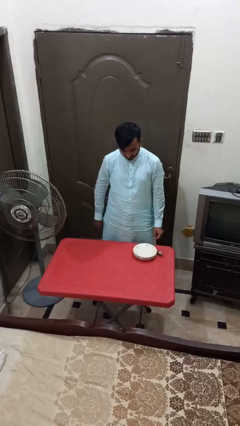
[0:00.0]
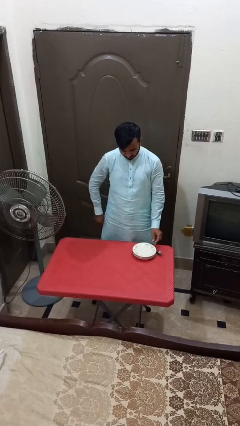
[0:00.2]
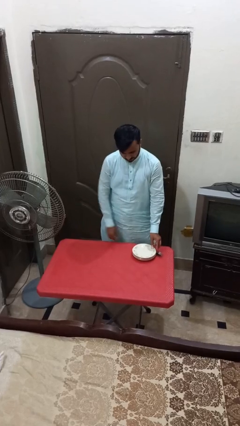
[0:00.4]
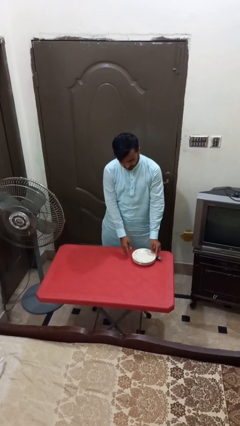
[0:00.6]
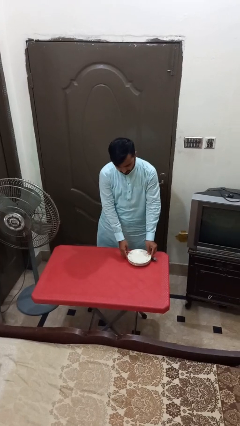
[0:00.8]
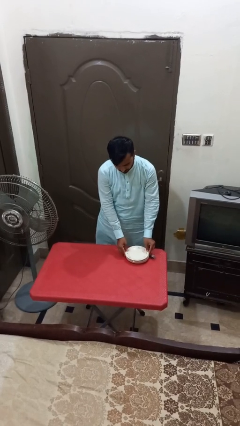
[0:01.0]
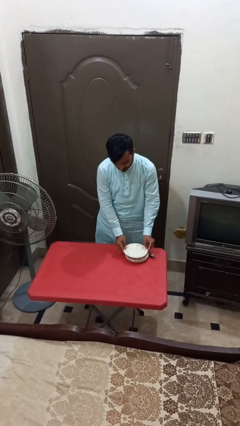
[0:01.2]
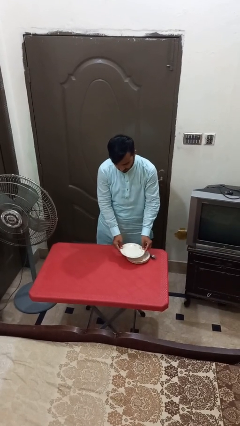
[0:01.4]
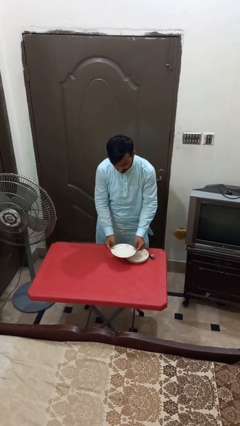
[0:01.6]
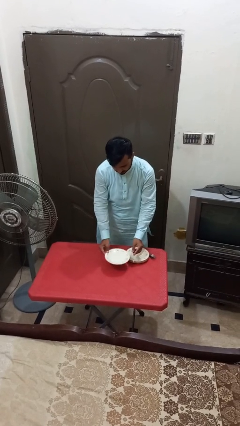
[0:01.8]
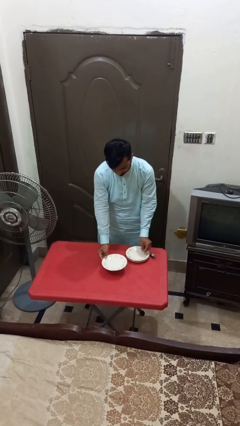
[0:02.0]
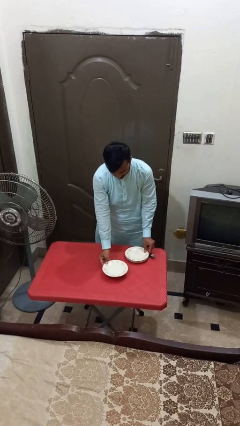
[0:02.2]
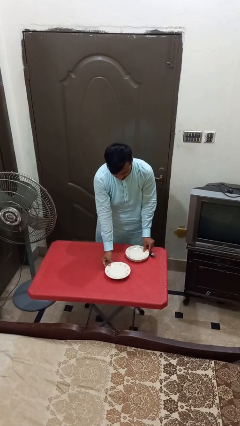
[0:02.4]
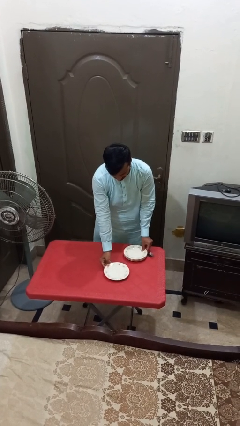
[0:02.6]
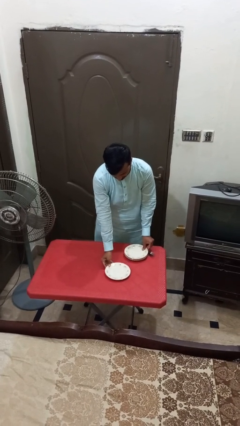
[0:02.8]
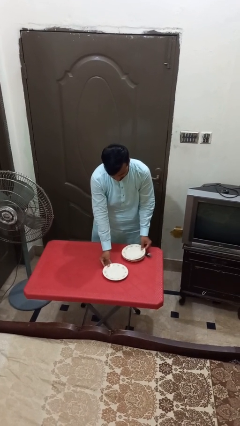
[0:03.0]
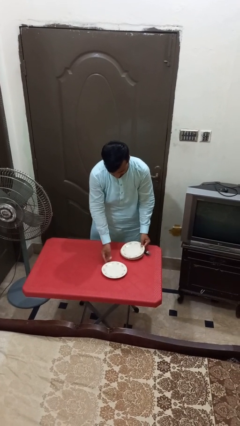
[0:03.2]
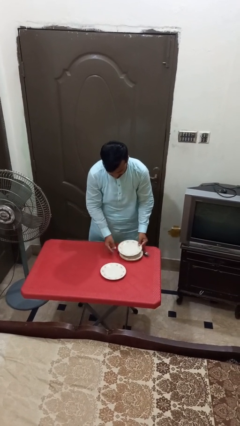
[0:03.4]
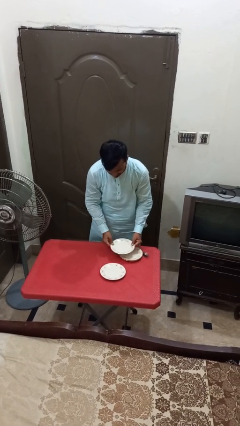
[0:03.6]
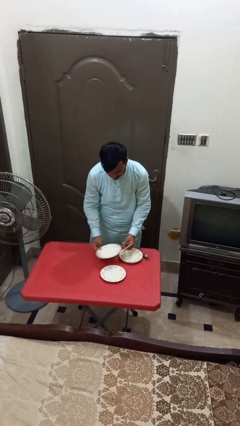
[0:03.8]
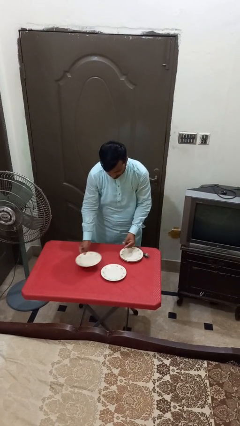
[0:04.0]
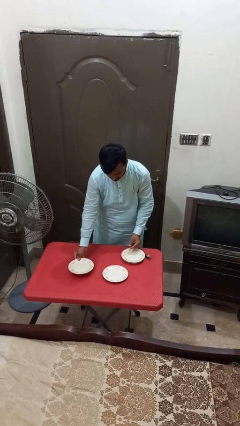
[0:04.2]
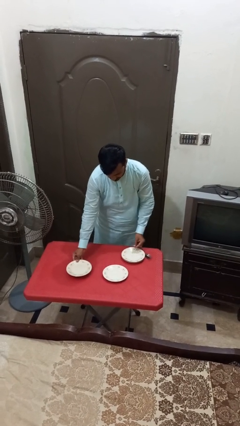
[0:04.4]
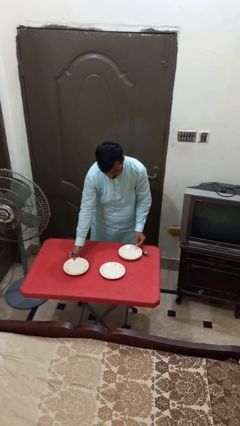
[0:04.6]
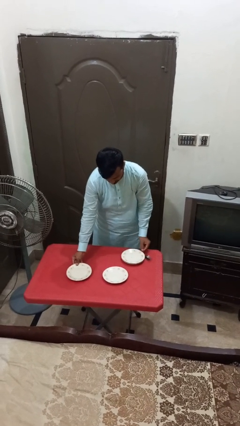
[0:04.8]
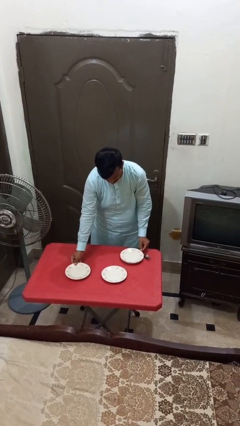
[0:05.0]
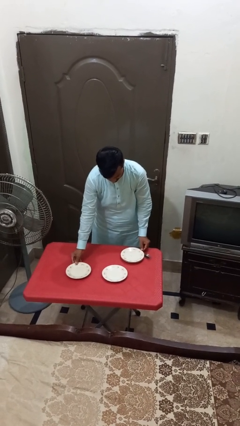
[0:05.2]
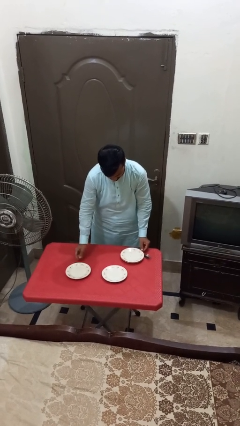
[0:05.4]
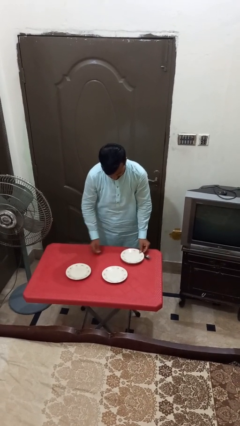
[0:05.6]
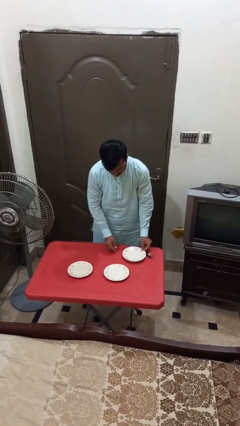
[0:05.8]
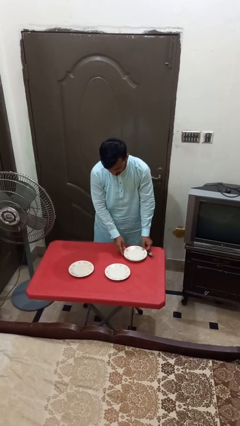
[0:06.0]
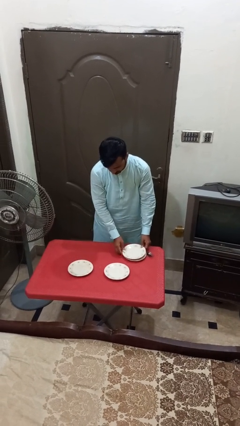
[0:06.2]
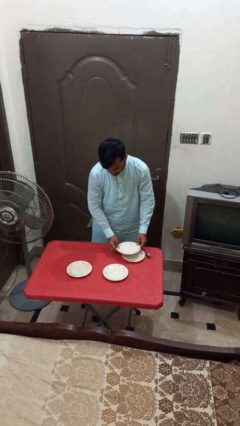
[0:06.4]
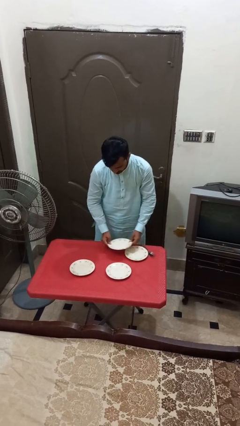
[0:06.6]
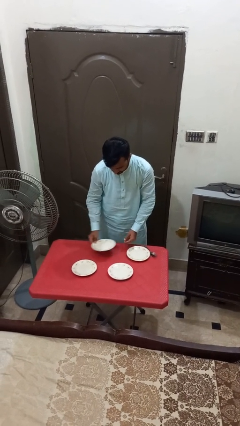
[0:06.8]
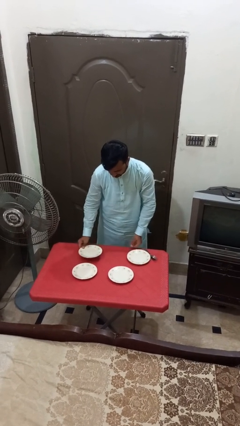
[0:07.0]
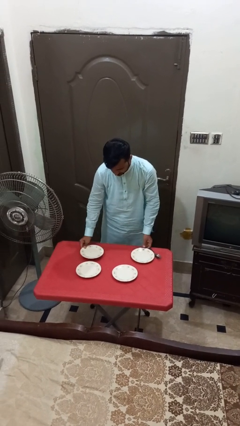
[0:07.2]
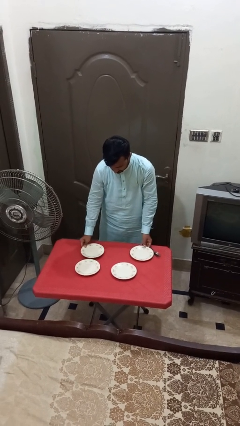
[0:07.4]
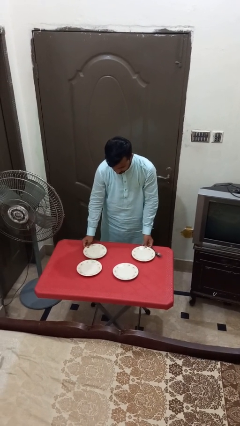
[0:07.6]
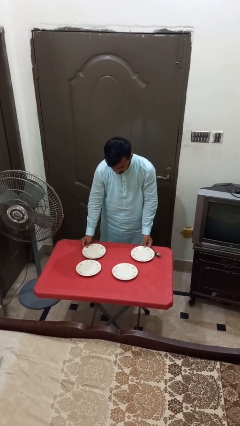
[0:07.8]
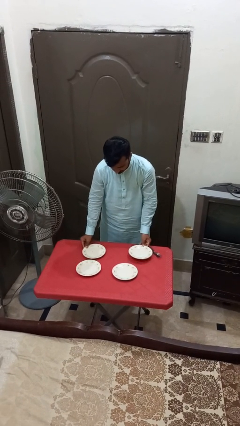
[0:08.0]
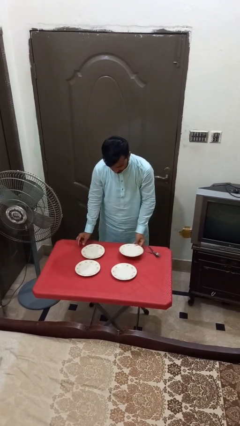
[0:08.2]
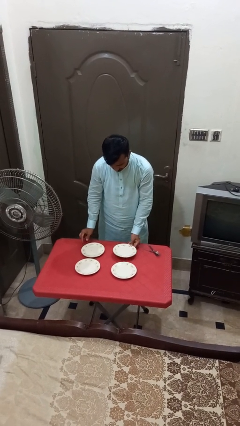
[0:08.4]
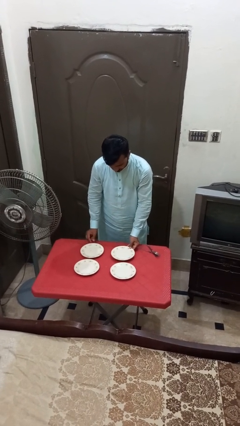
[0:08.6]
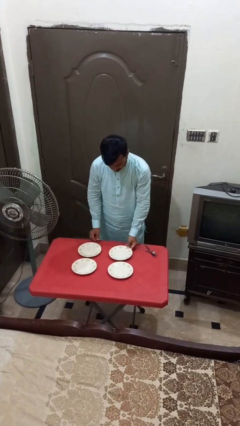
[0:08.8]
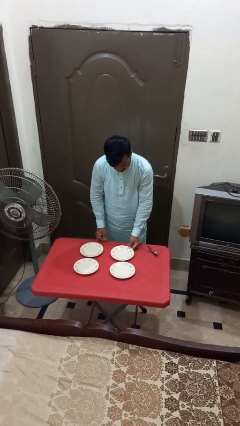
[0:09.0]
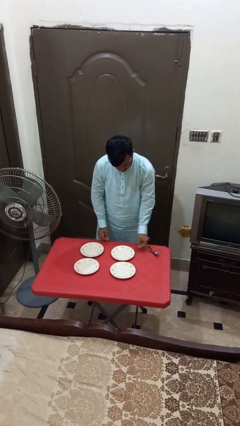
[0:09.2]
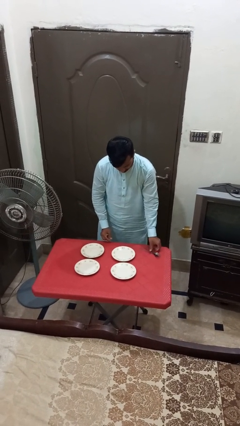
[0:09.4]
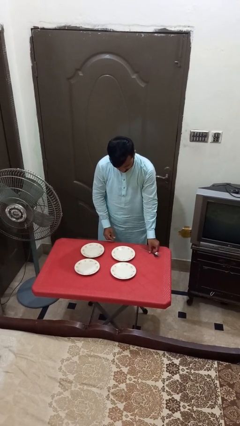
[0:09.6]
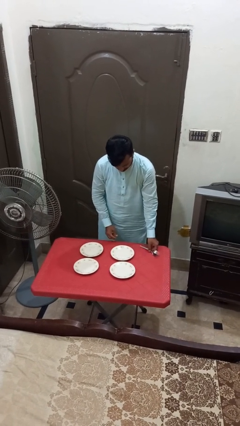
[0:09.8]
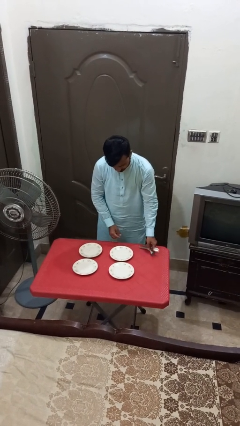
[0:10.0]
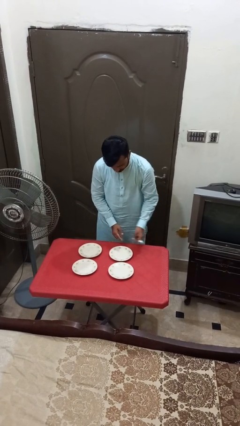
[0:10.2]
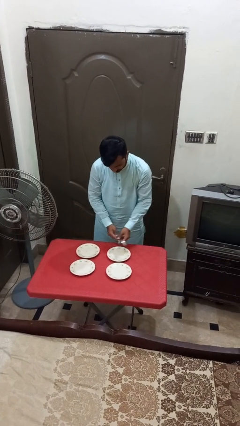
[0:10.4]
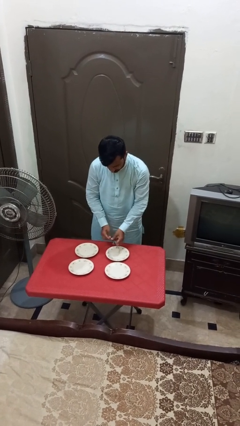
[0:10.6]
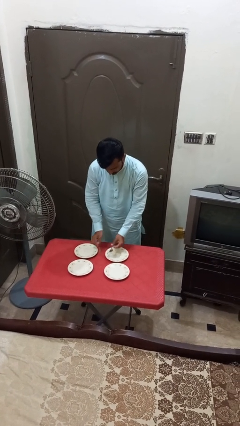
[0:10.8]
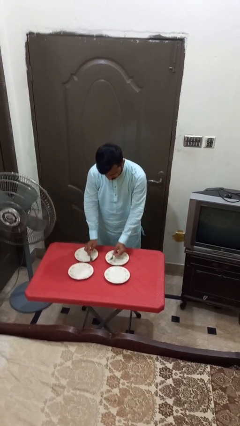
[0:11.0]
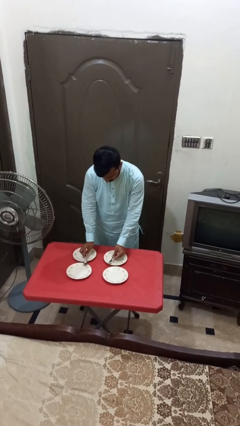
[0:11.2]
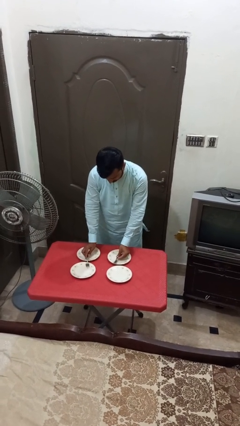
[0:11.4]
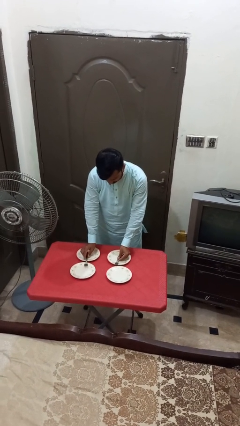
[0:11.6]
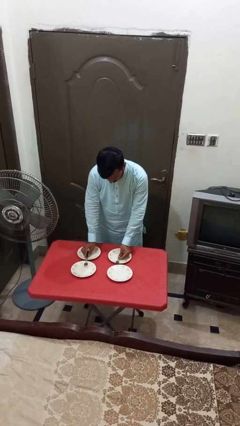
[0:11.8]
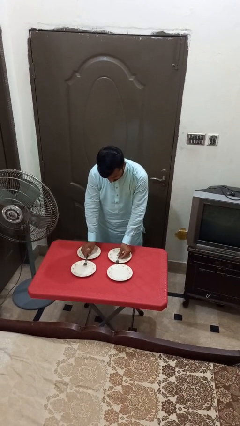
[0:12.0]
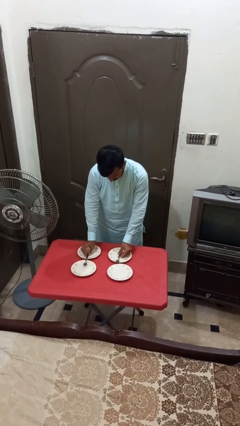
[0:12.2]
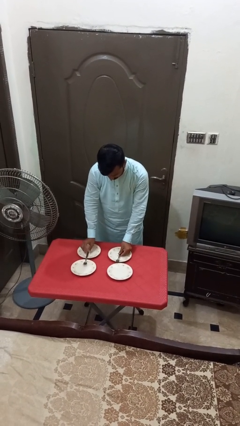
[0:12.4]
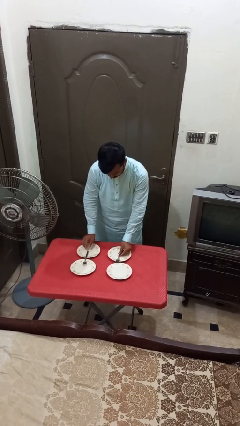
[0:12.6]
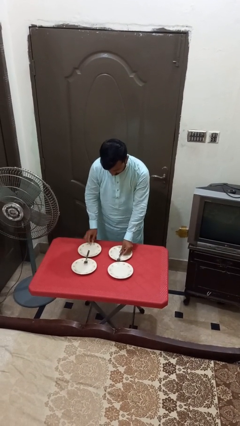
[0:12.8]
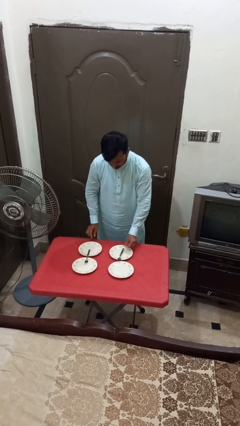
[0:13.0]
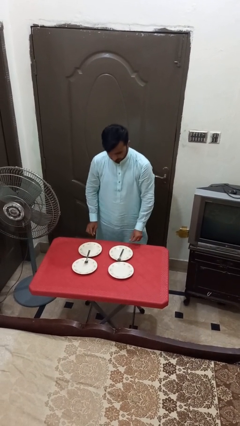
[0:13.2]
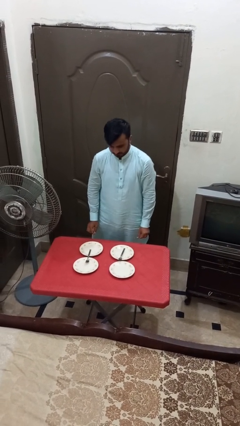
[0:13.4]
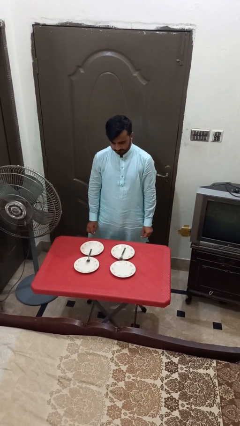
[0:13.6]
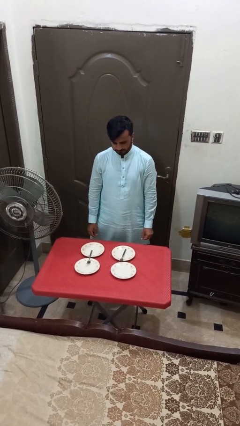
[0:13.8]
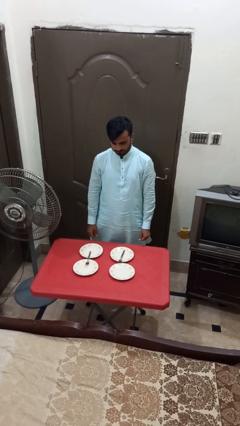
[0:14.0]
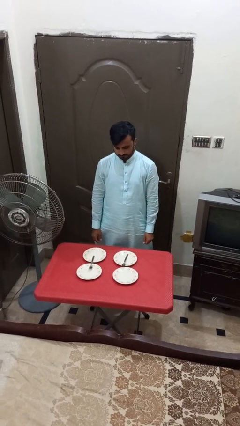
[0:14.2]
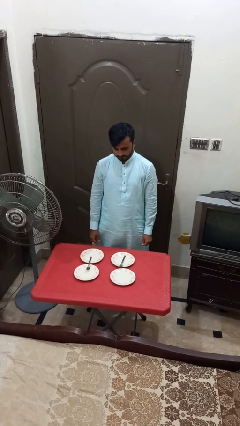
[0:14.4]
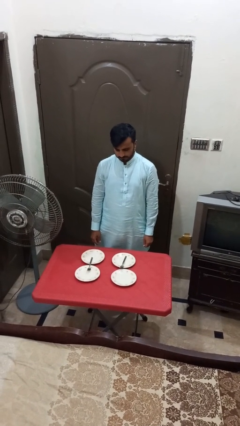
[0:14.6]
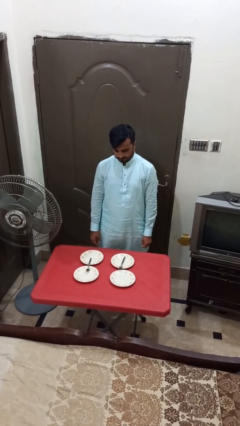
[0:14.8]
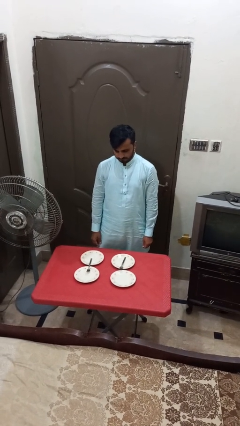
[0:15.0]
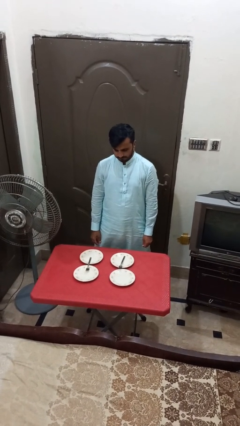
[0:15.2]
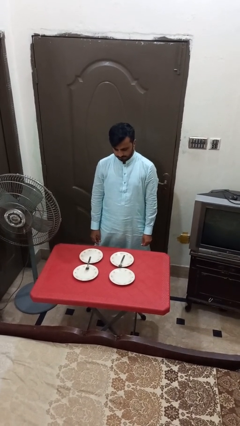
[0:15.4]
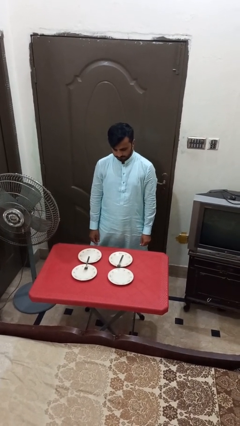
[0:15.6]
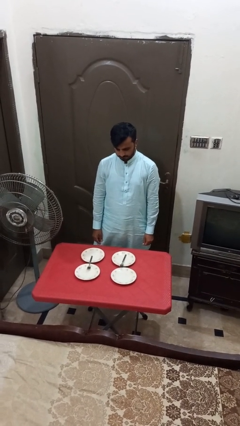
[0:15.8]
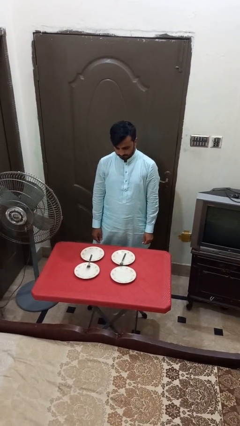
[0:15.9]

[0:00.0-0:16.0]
person sets table

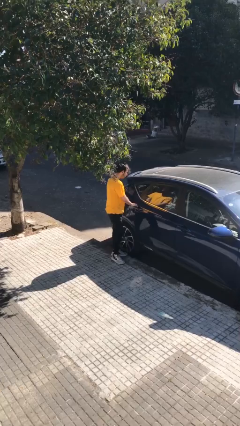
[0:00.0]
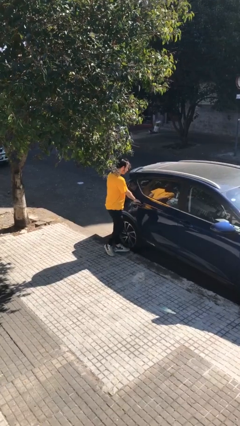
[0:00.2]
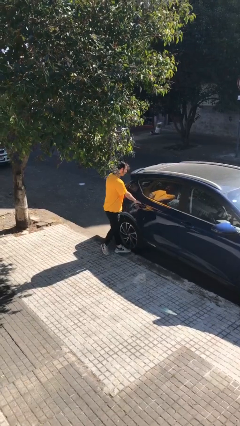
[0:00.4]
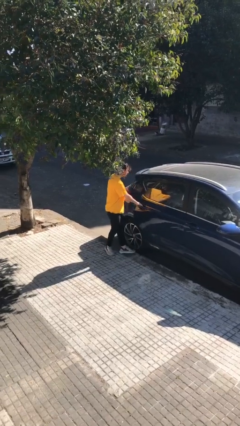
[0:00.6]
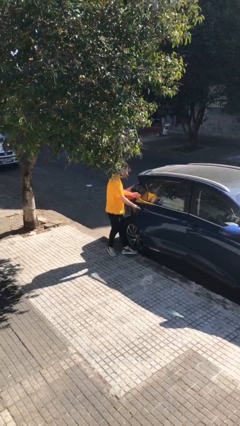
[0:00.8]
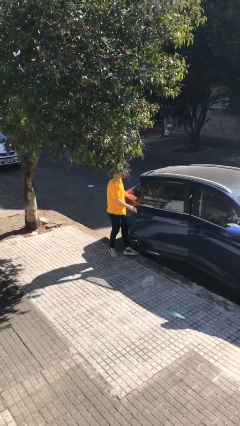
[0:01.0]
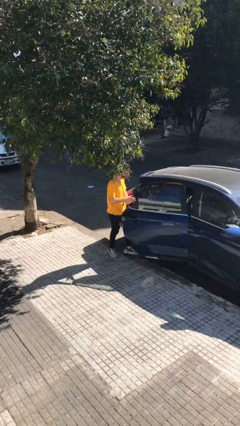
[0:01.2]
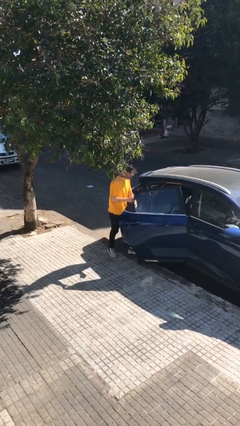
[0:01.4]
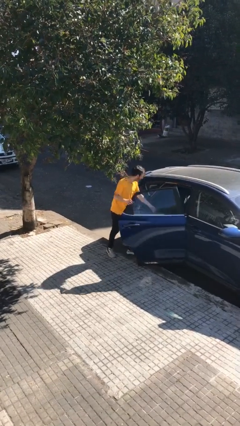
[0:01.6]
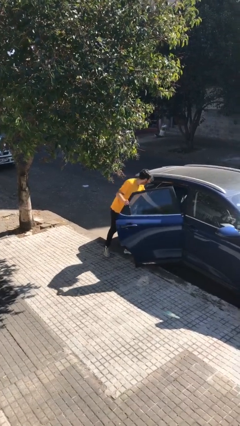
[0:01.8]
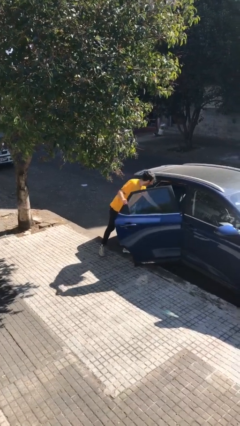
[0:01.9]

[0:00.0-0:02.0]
person opens car door
